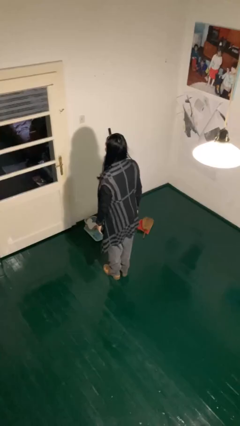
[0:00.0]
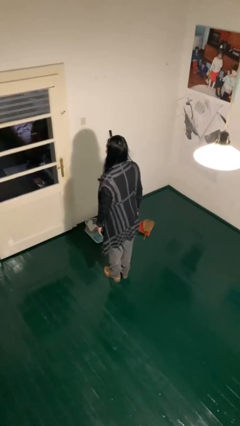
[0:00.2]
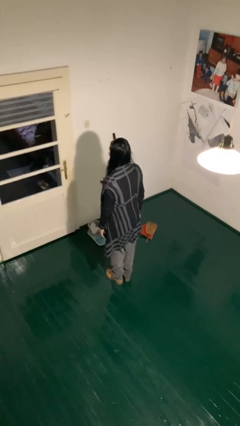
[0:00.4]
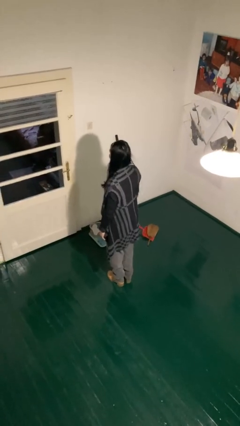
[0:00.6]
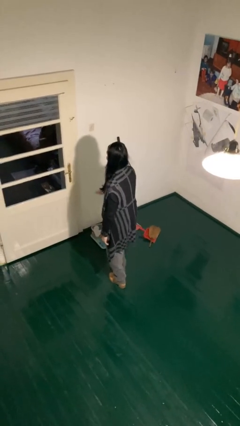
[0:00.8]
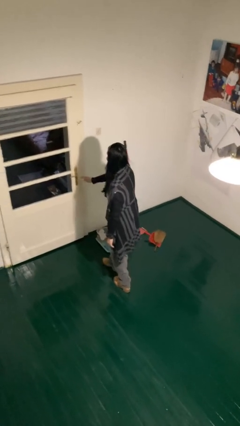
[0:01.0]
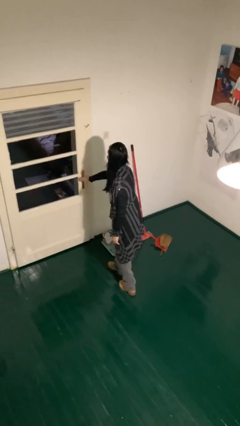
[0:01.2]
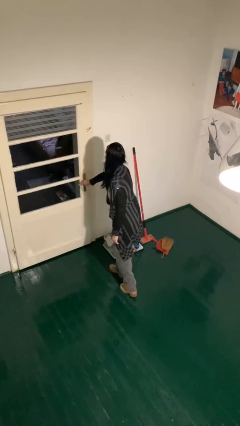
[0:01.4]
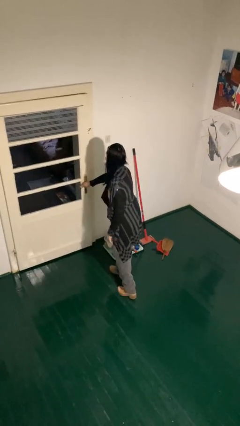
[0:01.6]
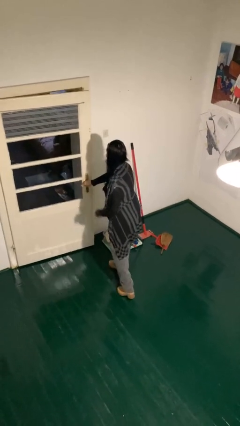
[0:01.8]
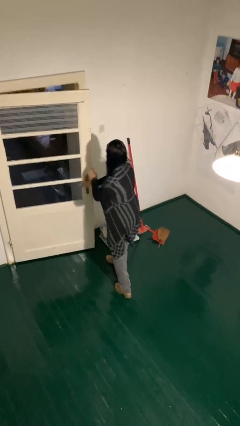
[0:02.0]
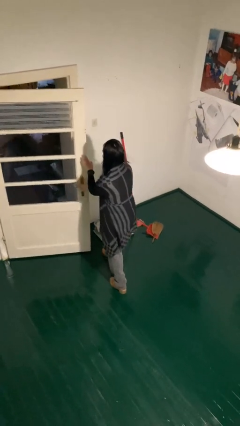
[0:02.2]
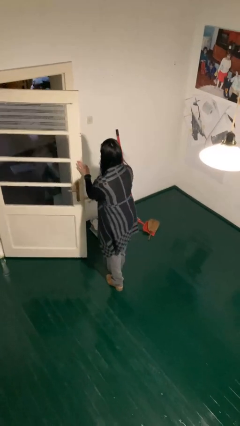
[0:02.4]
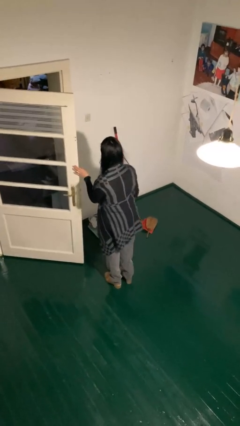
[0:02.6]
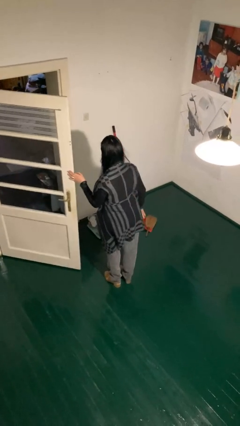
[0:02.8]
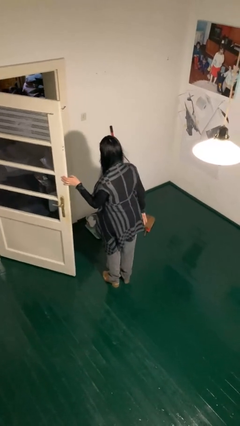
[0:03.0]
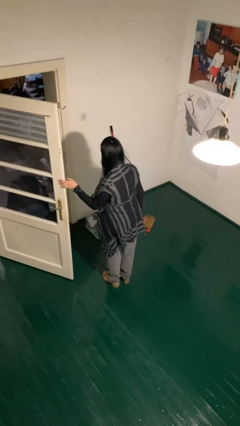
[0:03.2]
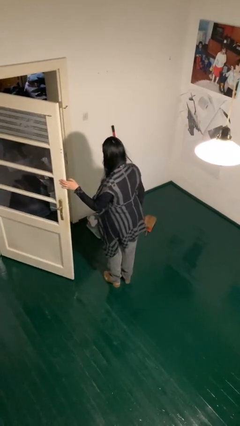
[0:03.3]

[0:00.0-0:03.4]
person opens facility door

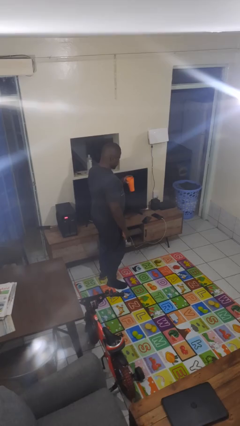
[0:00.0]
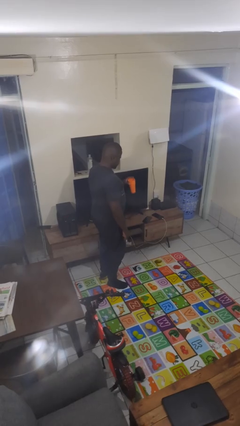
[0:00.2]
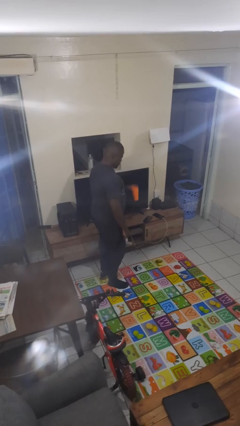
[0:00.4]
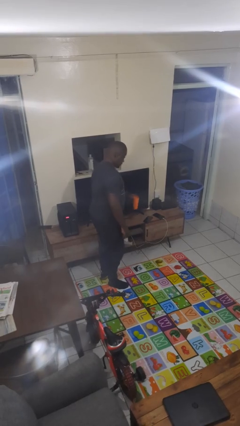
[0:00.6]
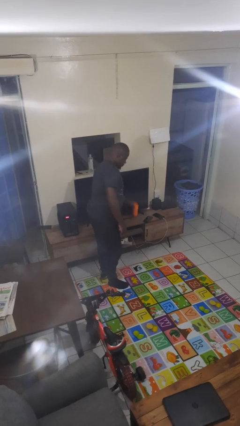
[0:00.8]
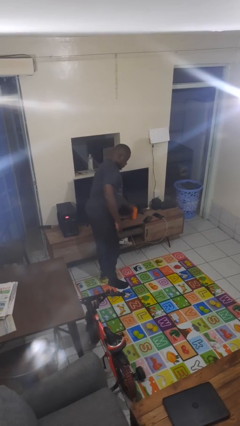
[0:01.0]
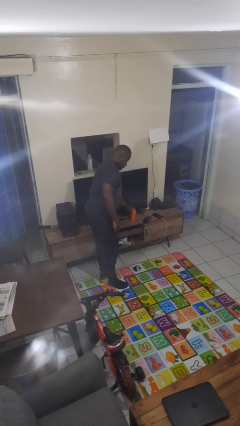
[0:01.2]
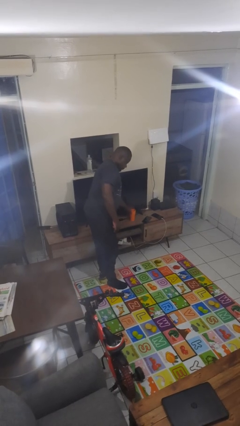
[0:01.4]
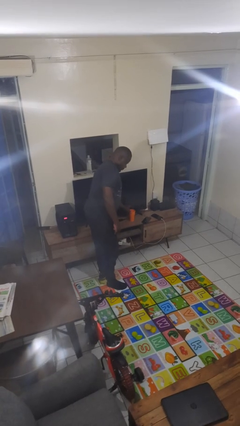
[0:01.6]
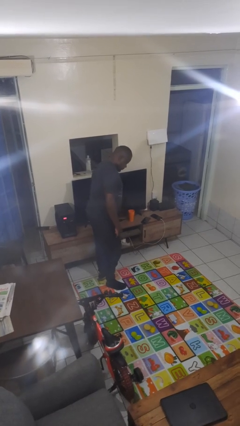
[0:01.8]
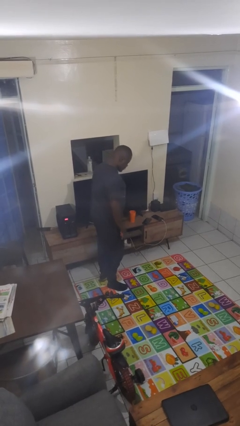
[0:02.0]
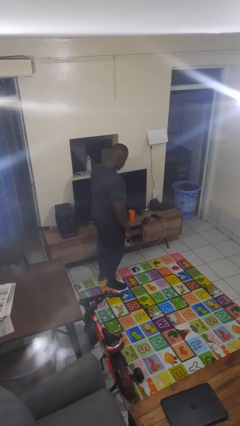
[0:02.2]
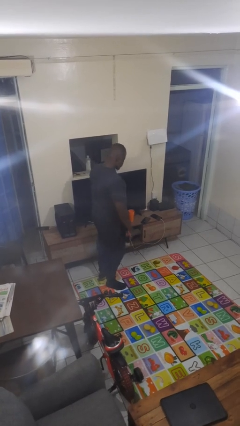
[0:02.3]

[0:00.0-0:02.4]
person puts down object on countertop

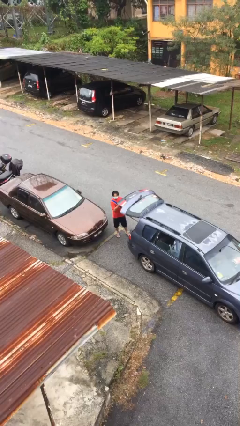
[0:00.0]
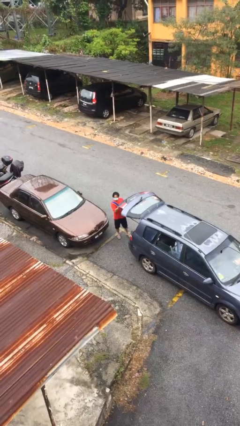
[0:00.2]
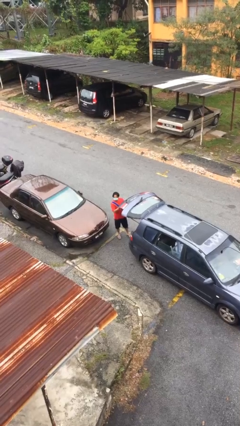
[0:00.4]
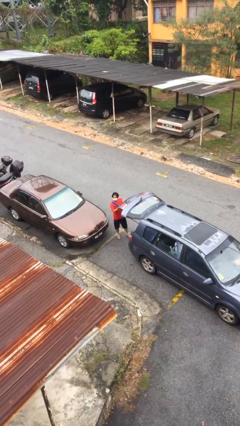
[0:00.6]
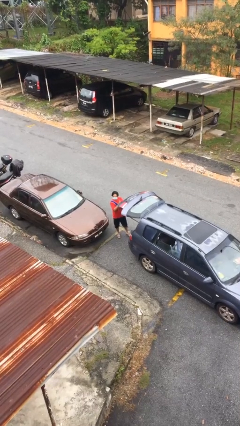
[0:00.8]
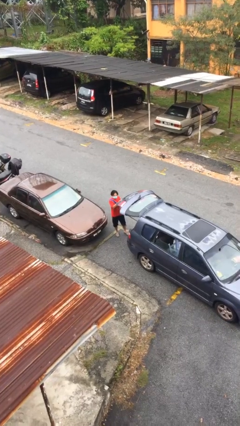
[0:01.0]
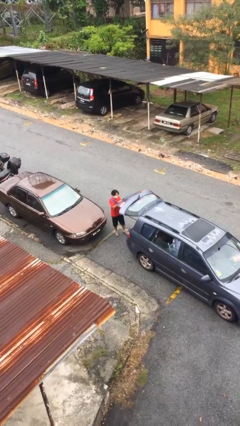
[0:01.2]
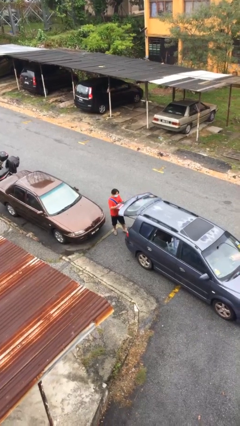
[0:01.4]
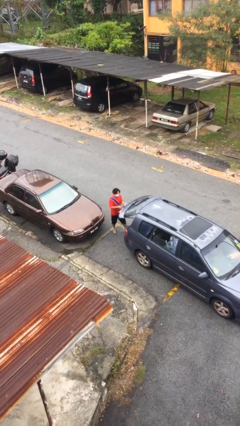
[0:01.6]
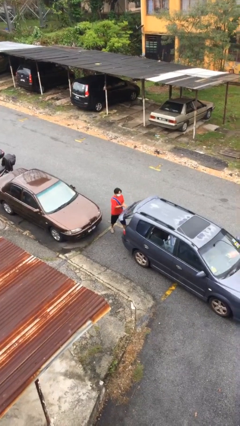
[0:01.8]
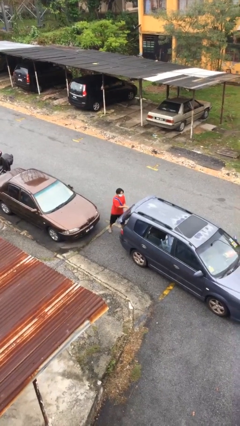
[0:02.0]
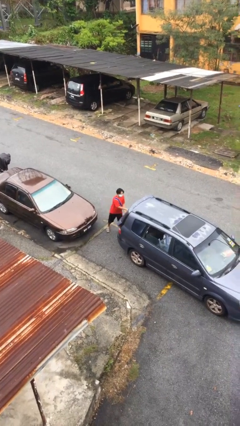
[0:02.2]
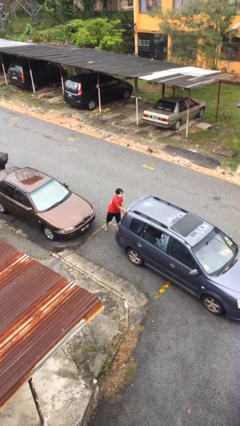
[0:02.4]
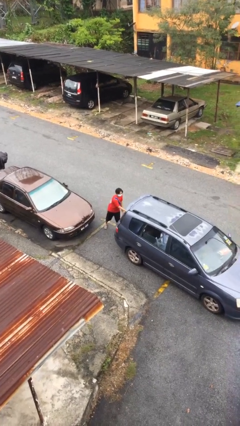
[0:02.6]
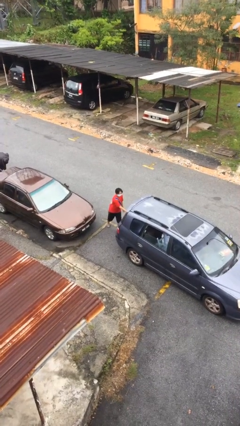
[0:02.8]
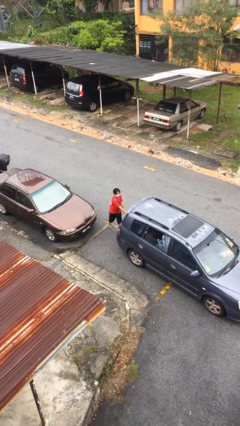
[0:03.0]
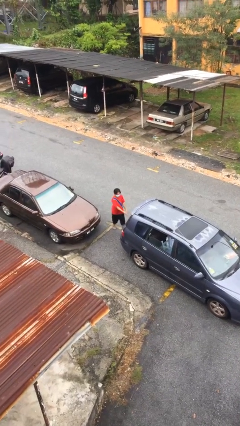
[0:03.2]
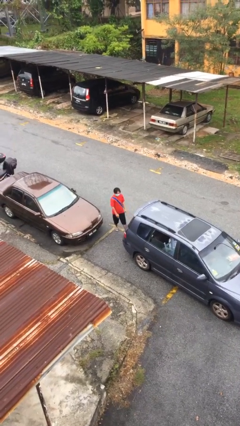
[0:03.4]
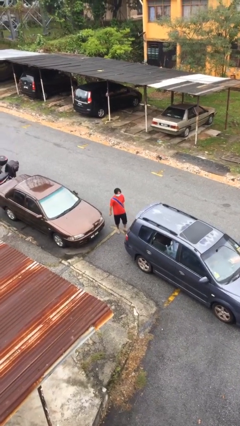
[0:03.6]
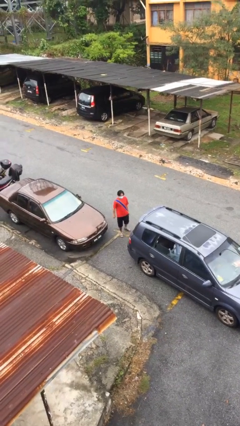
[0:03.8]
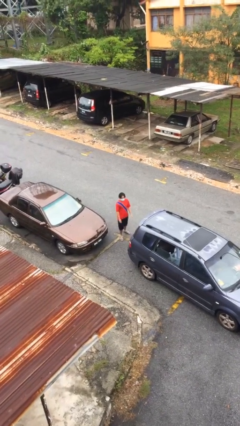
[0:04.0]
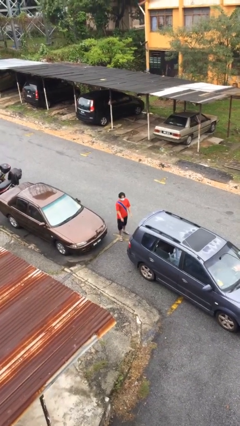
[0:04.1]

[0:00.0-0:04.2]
person closes car trunk

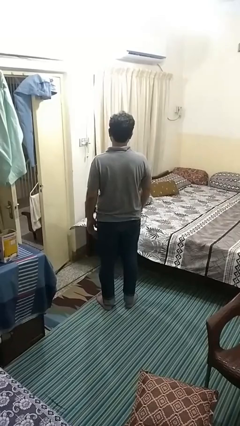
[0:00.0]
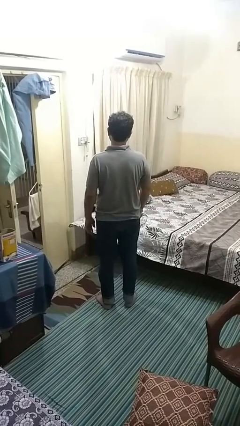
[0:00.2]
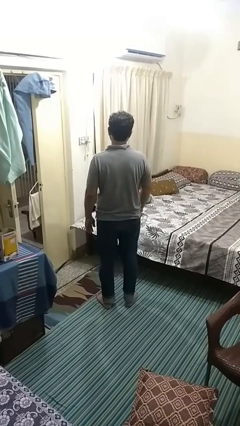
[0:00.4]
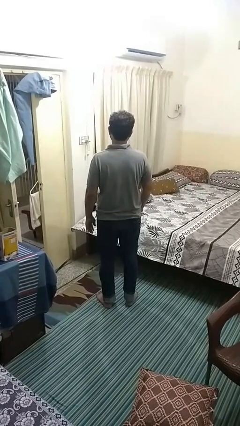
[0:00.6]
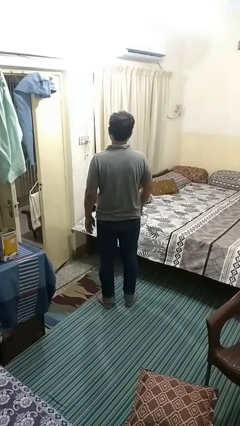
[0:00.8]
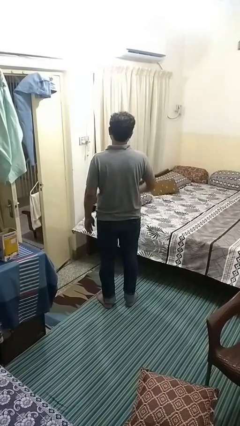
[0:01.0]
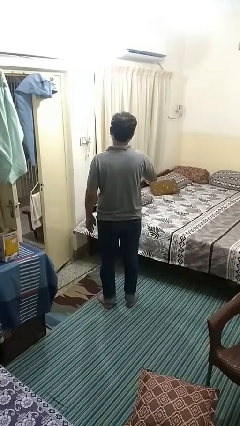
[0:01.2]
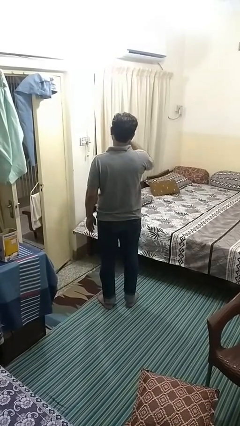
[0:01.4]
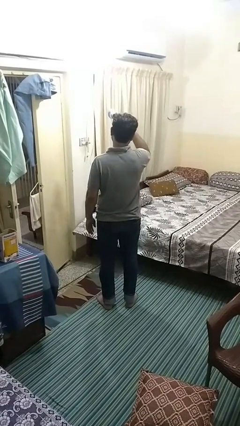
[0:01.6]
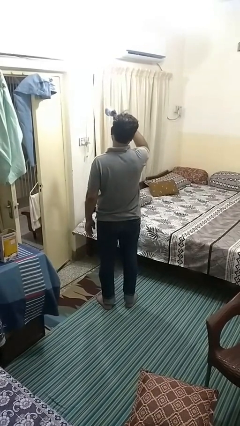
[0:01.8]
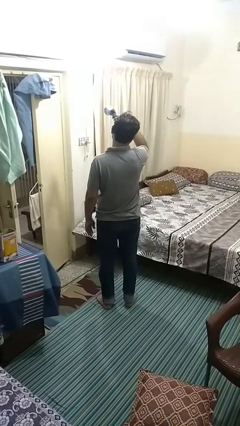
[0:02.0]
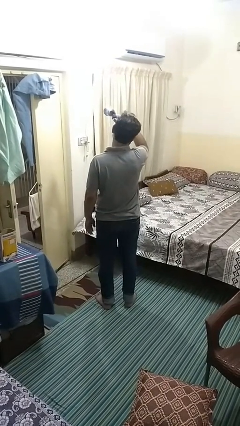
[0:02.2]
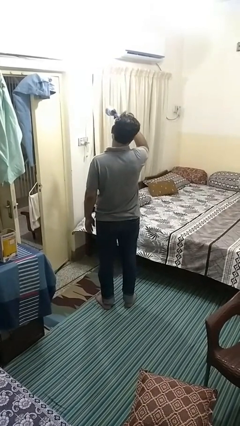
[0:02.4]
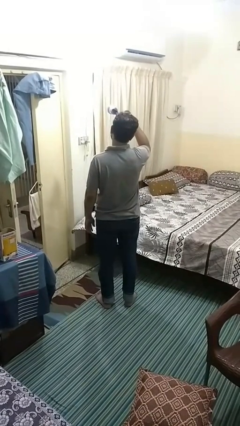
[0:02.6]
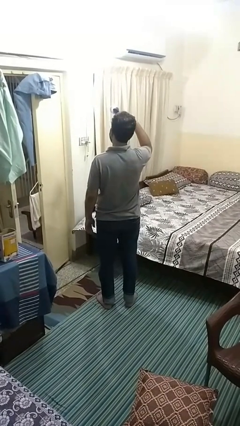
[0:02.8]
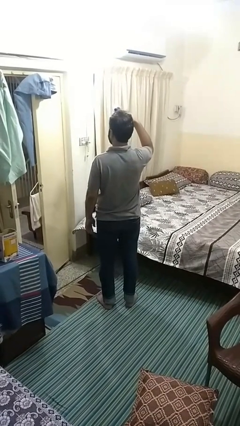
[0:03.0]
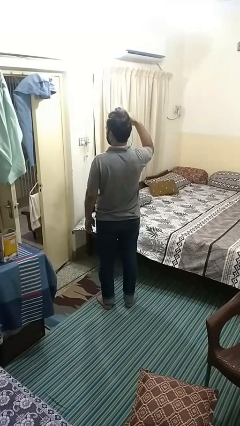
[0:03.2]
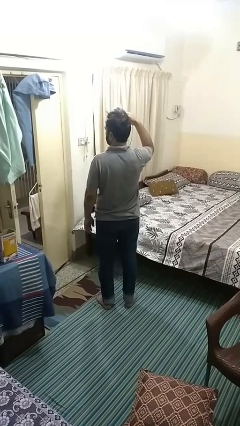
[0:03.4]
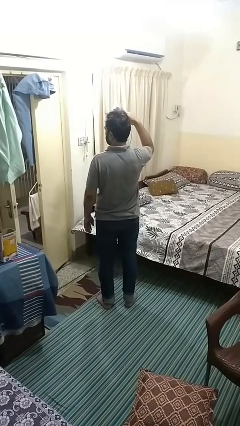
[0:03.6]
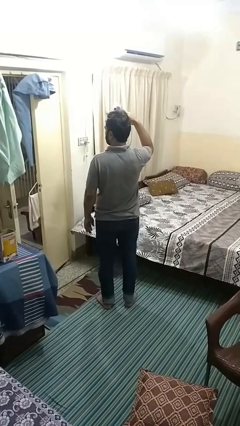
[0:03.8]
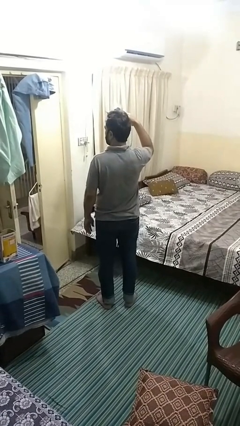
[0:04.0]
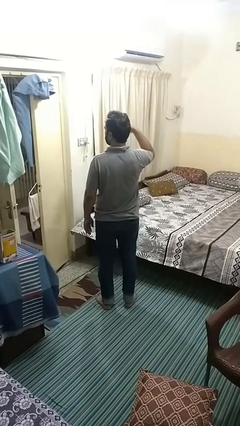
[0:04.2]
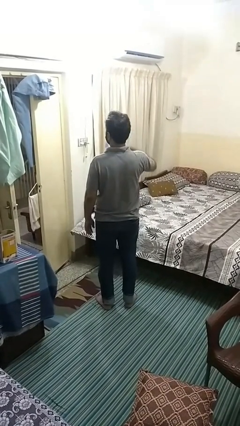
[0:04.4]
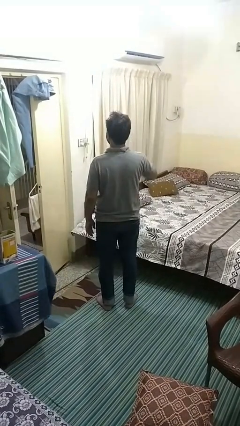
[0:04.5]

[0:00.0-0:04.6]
person dries hair with hairdryer

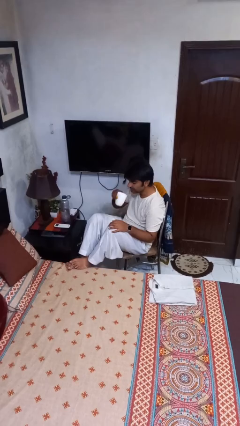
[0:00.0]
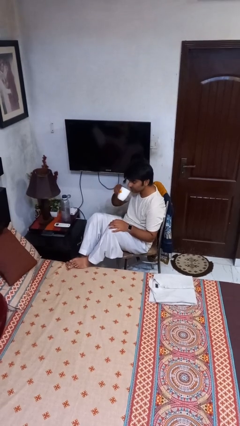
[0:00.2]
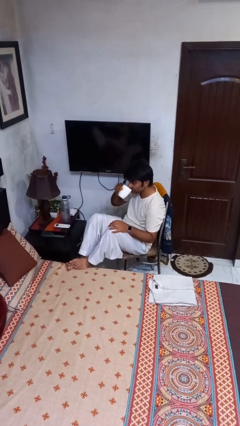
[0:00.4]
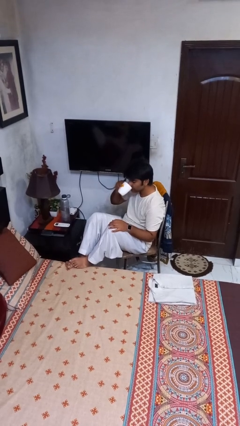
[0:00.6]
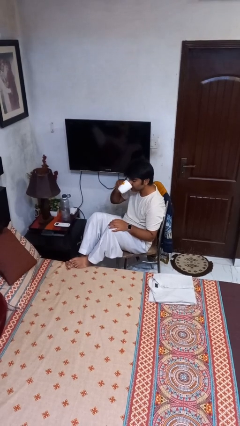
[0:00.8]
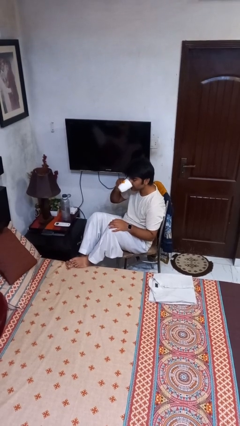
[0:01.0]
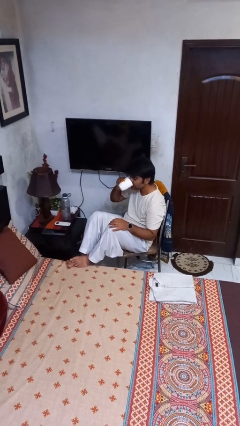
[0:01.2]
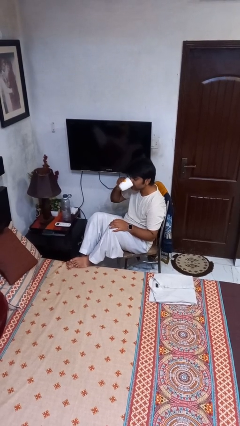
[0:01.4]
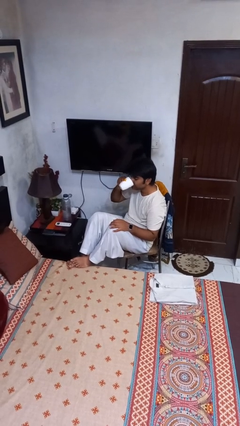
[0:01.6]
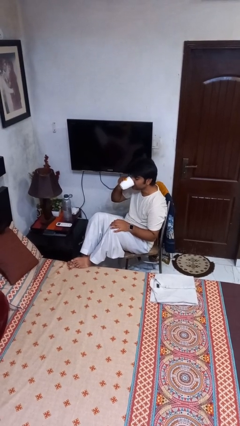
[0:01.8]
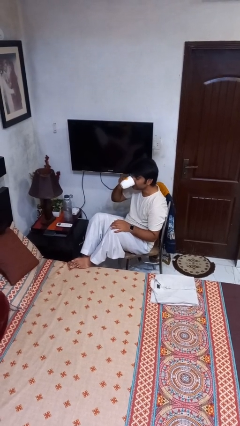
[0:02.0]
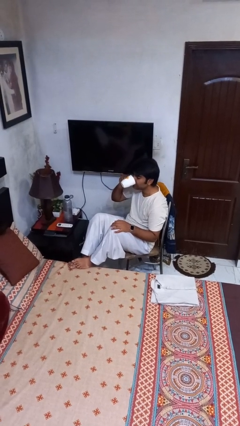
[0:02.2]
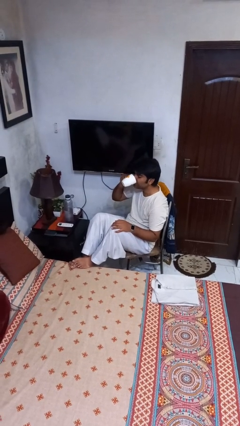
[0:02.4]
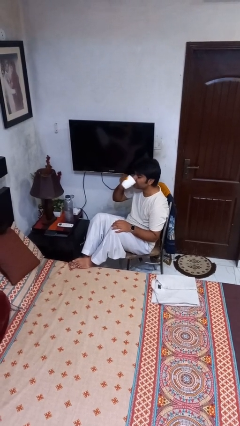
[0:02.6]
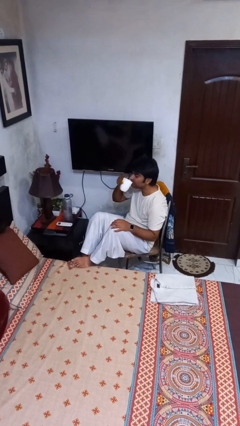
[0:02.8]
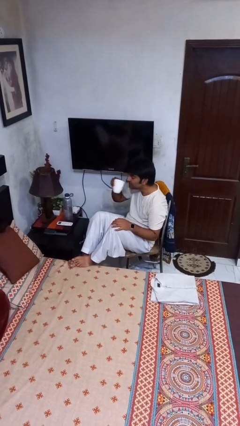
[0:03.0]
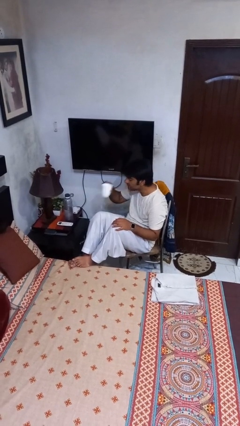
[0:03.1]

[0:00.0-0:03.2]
person drinks from mug
